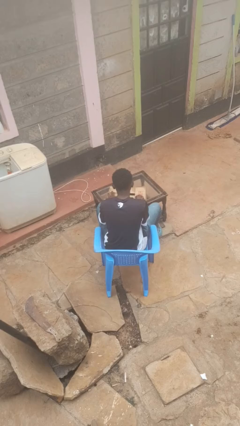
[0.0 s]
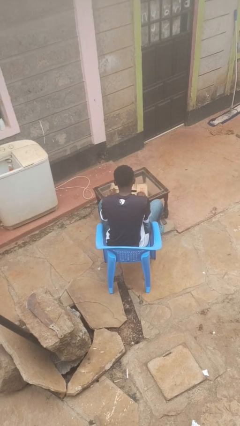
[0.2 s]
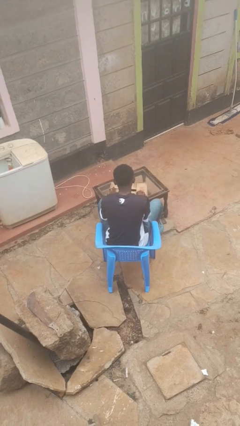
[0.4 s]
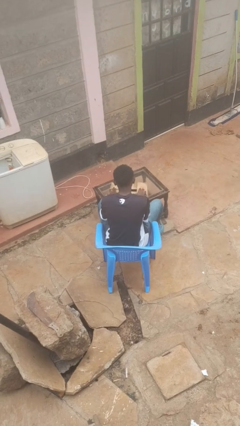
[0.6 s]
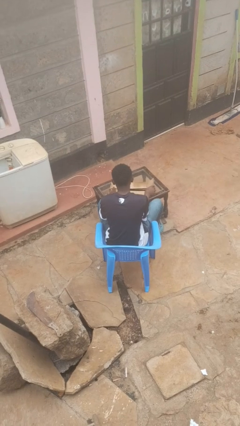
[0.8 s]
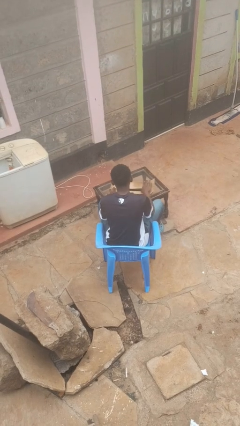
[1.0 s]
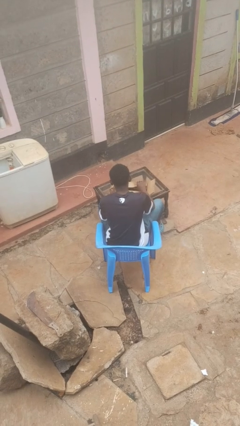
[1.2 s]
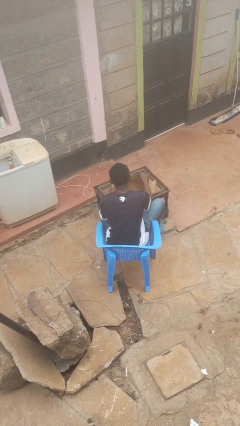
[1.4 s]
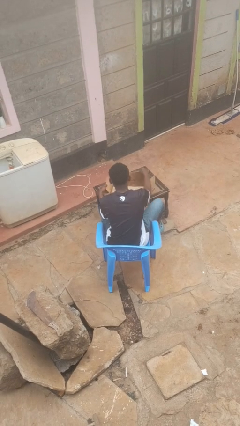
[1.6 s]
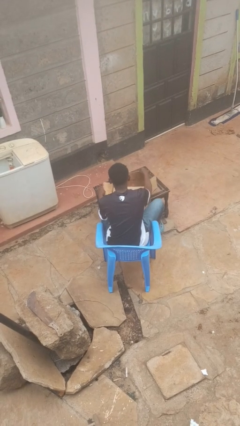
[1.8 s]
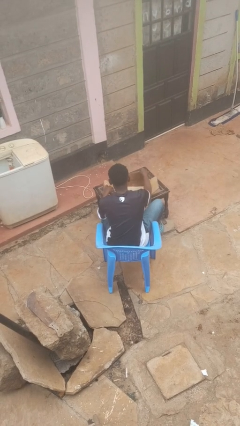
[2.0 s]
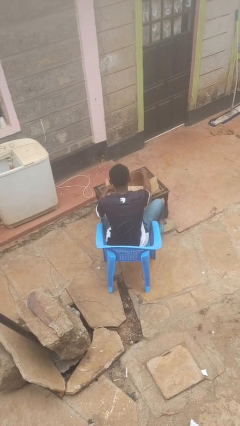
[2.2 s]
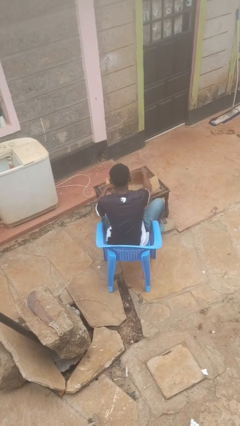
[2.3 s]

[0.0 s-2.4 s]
person opens box

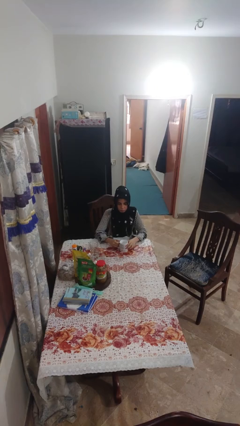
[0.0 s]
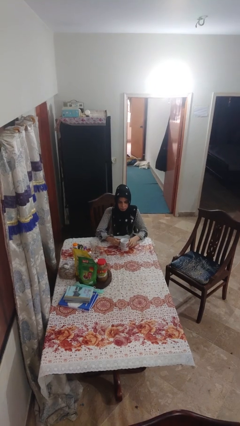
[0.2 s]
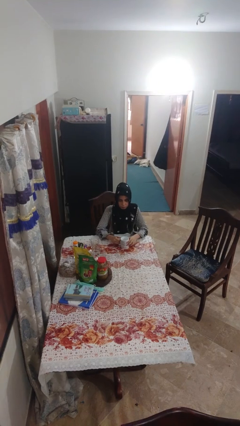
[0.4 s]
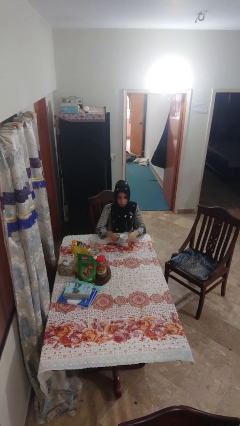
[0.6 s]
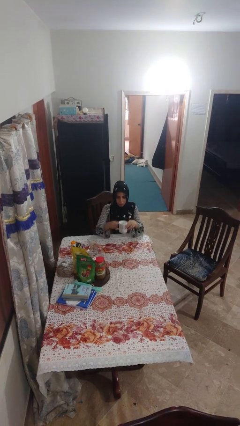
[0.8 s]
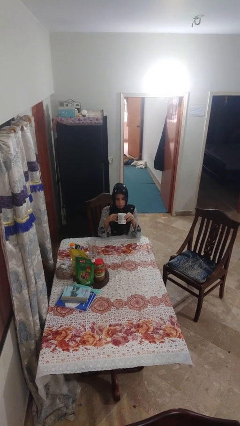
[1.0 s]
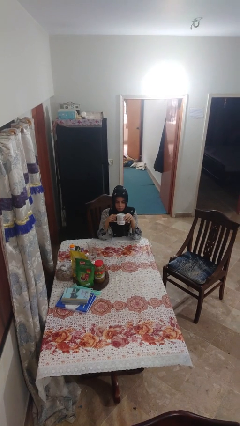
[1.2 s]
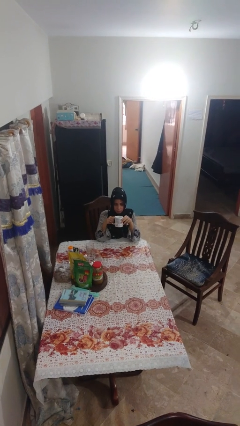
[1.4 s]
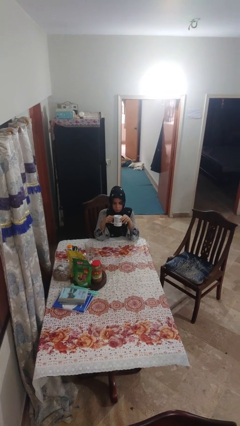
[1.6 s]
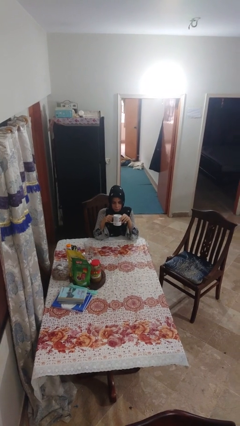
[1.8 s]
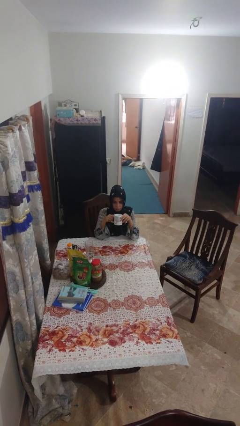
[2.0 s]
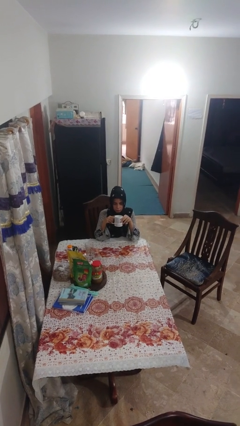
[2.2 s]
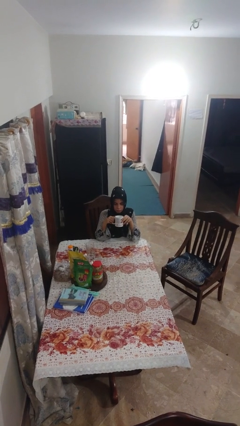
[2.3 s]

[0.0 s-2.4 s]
person picks up object from table

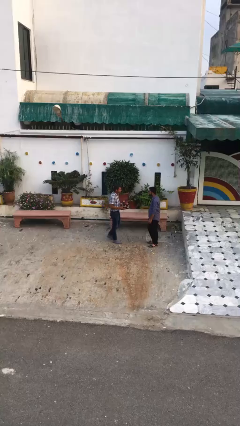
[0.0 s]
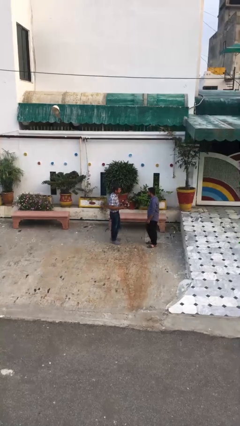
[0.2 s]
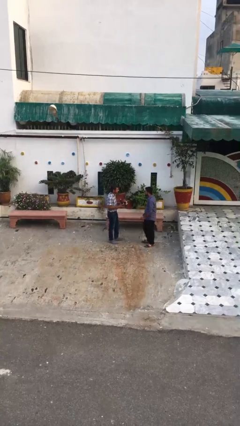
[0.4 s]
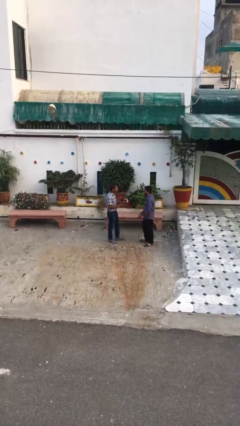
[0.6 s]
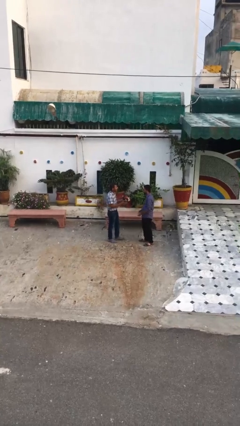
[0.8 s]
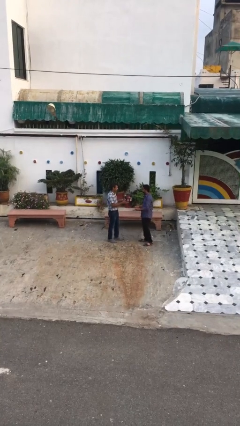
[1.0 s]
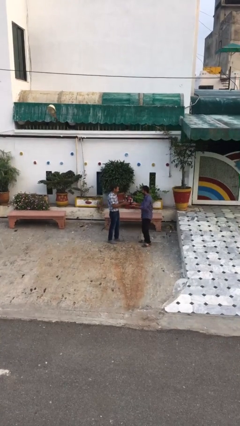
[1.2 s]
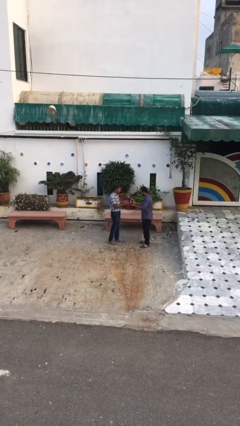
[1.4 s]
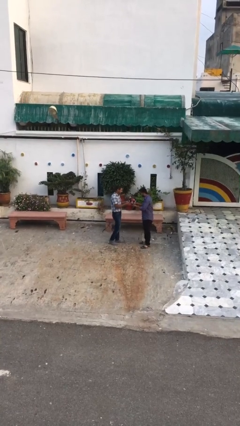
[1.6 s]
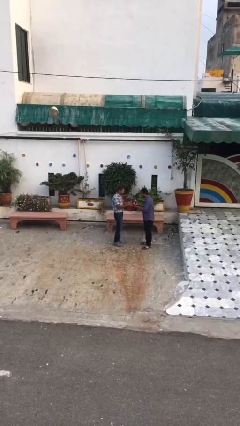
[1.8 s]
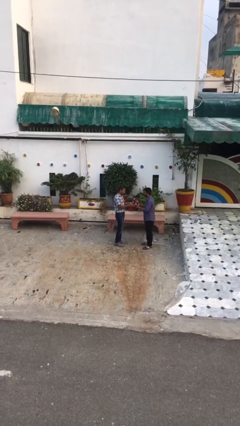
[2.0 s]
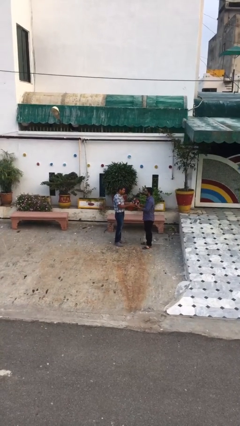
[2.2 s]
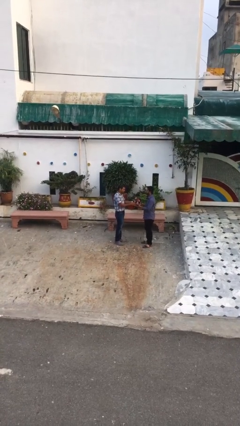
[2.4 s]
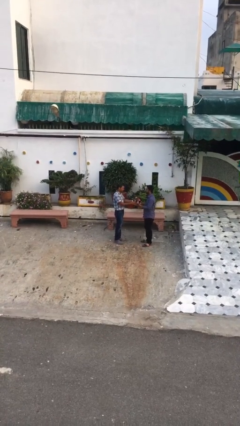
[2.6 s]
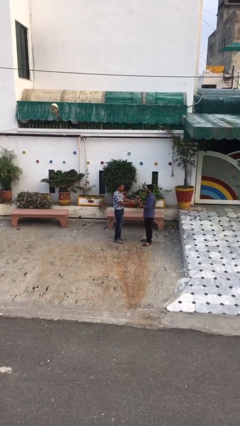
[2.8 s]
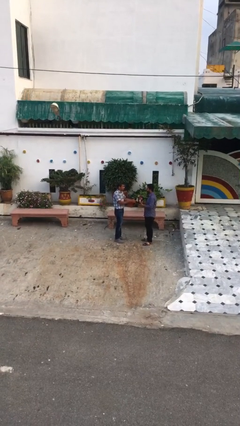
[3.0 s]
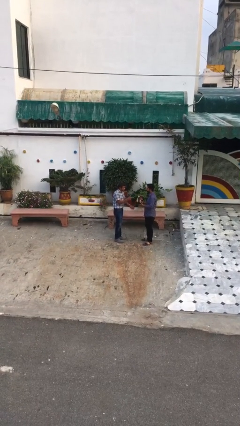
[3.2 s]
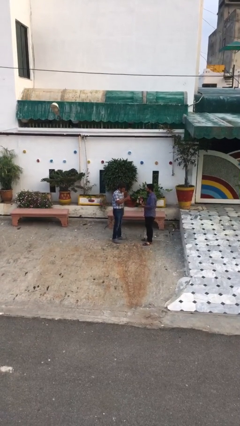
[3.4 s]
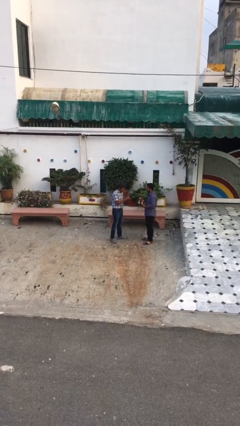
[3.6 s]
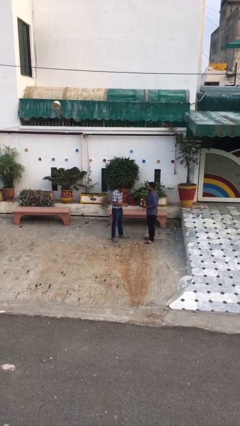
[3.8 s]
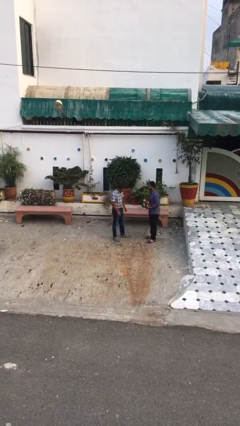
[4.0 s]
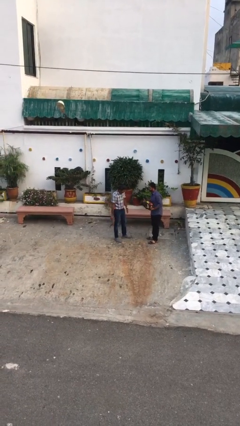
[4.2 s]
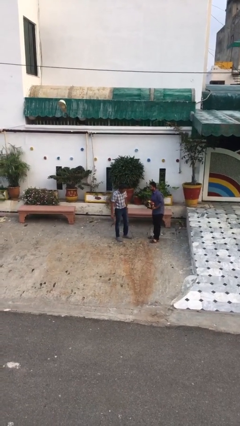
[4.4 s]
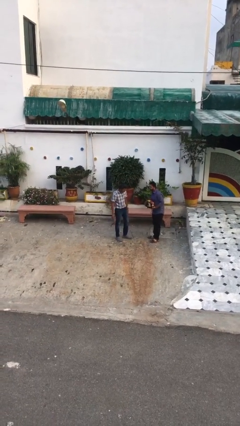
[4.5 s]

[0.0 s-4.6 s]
person transfers object to person

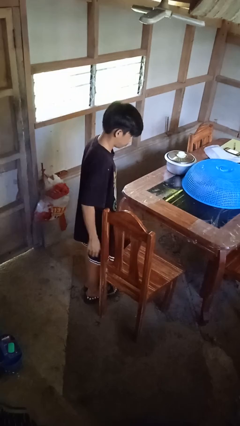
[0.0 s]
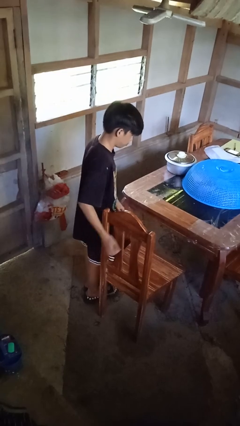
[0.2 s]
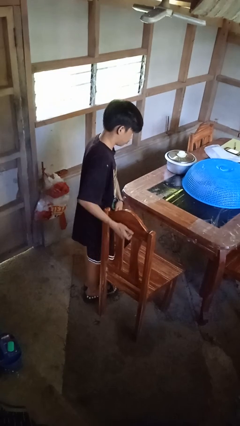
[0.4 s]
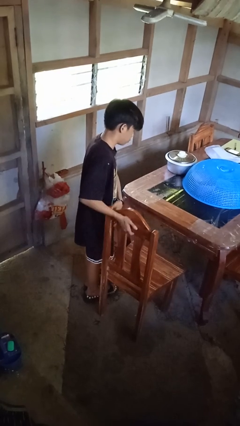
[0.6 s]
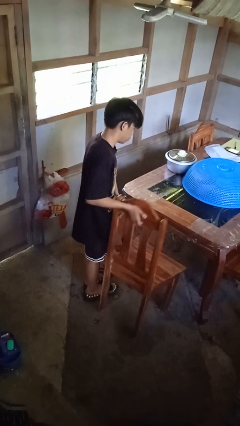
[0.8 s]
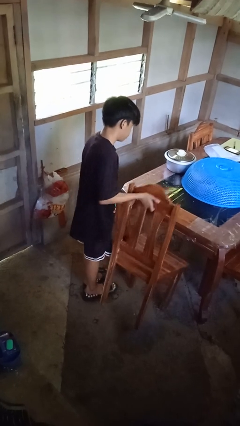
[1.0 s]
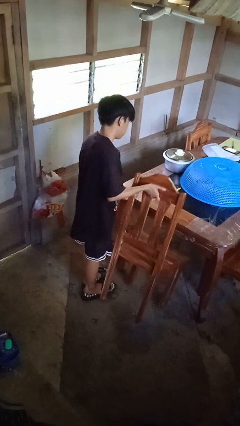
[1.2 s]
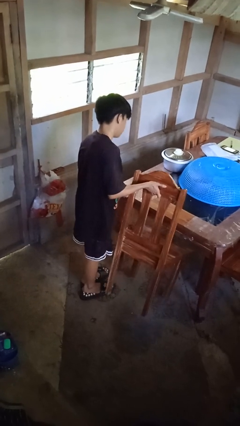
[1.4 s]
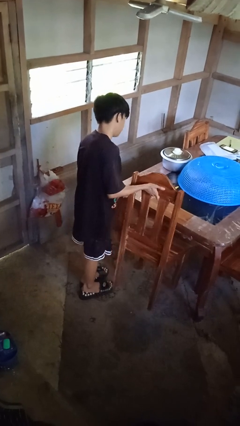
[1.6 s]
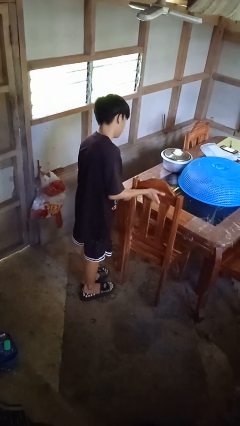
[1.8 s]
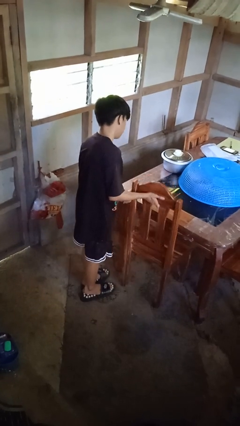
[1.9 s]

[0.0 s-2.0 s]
person pushes in chair

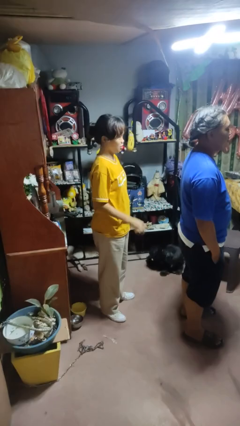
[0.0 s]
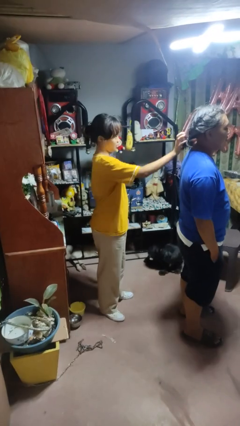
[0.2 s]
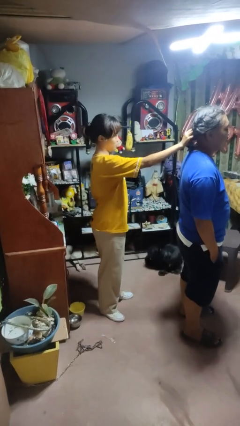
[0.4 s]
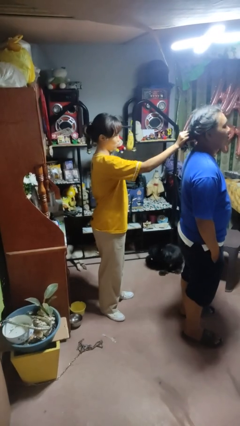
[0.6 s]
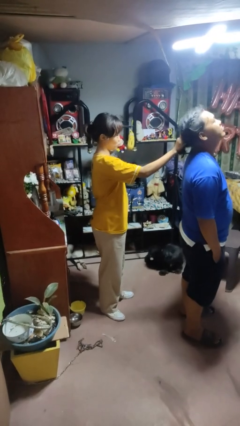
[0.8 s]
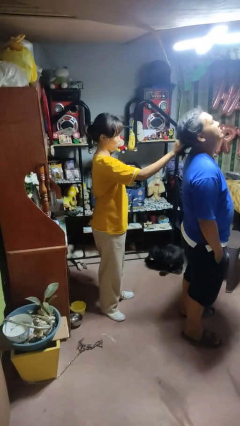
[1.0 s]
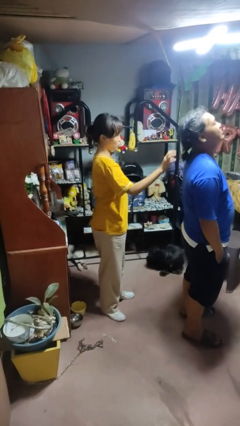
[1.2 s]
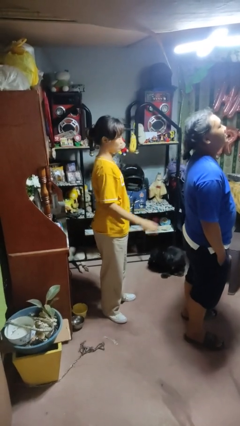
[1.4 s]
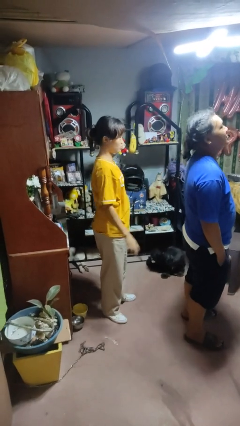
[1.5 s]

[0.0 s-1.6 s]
person grabs person by hair

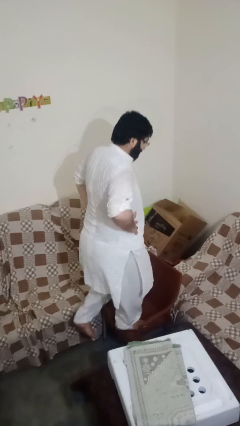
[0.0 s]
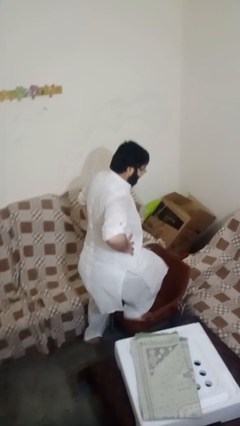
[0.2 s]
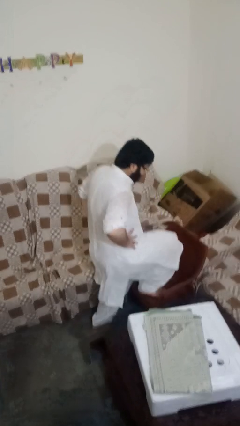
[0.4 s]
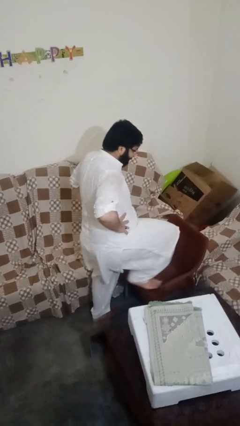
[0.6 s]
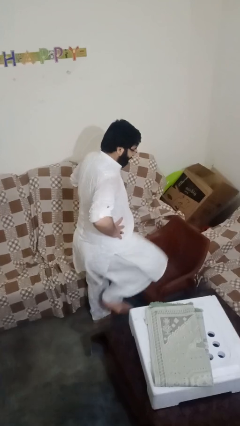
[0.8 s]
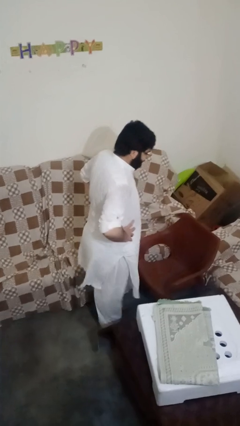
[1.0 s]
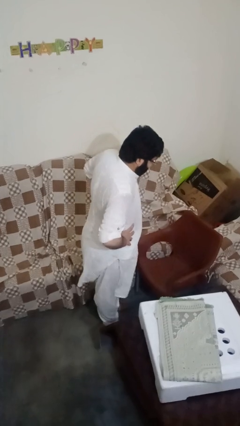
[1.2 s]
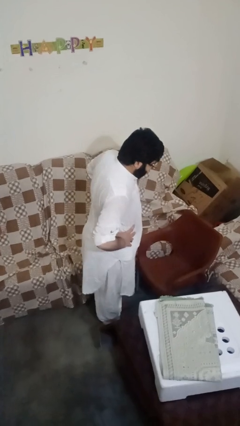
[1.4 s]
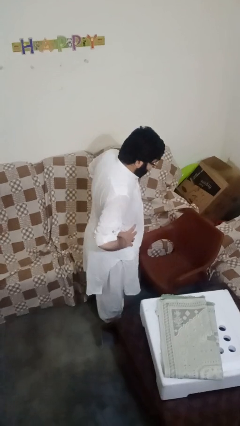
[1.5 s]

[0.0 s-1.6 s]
person climbs off chair

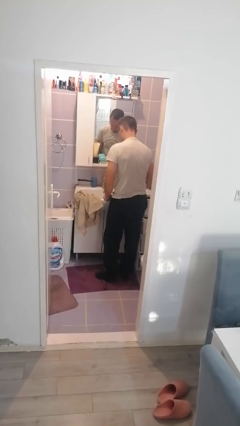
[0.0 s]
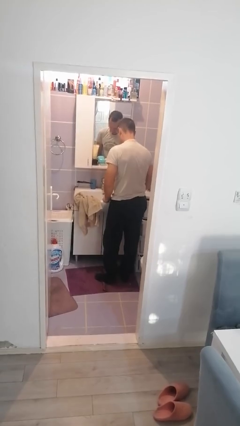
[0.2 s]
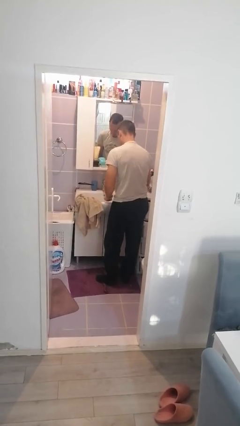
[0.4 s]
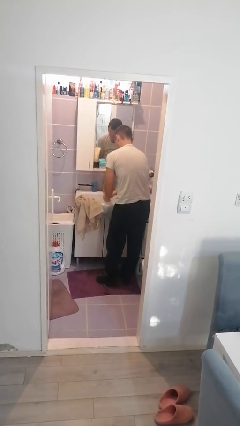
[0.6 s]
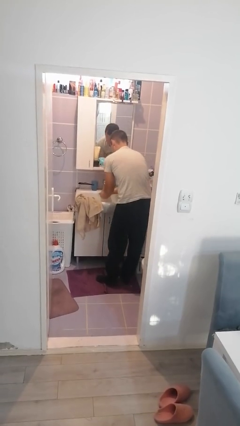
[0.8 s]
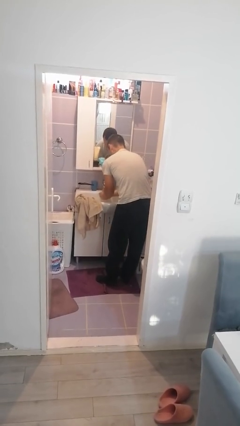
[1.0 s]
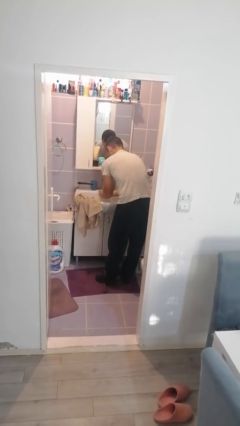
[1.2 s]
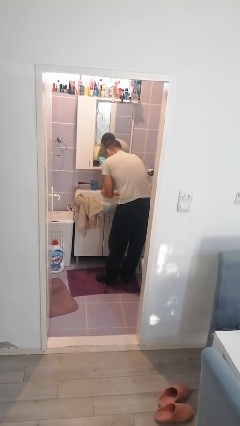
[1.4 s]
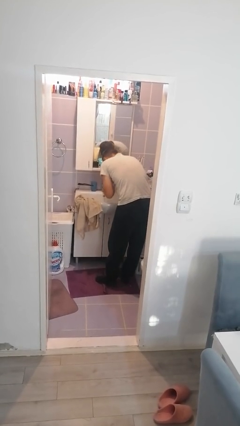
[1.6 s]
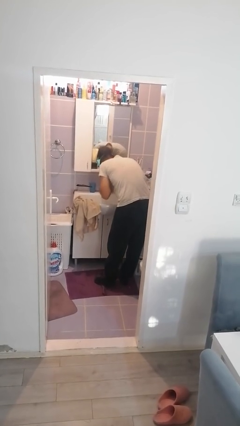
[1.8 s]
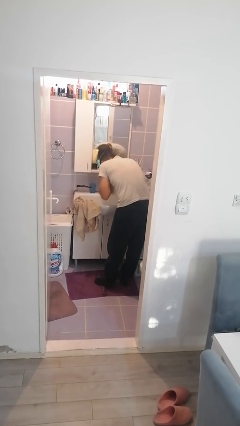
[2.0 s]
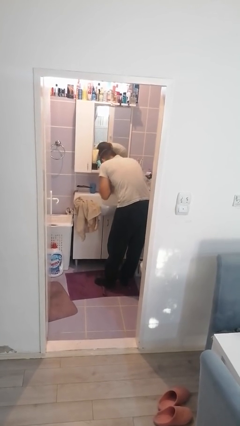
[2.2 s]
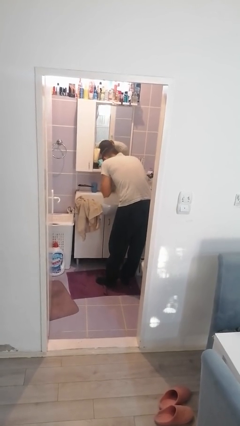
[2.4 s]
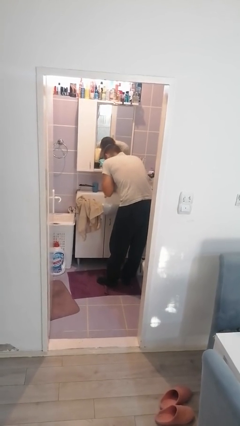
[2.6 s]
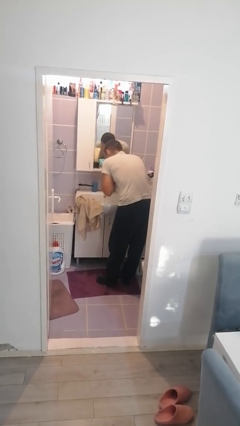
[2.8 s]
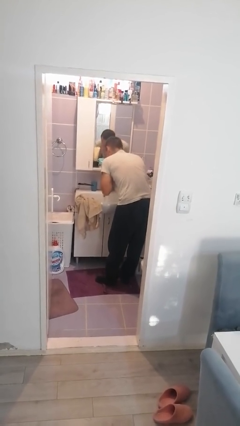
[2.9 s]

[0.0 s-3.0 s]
person washes face
